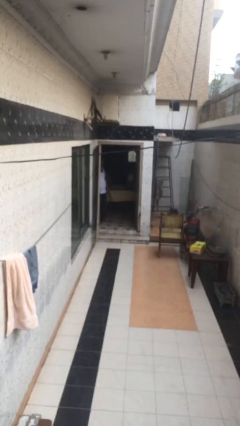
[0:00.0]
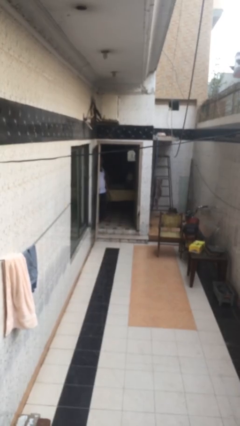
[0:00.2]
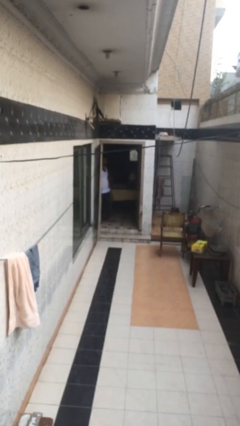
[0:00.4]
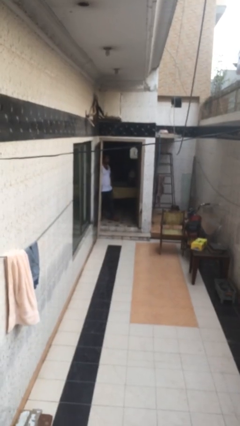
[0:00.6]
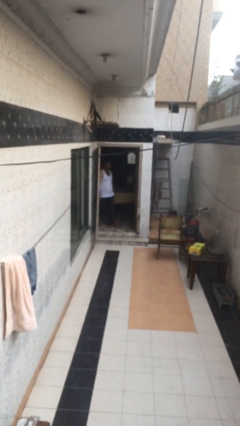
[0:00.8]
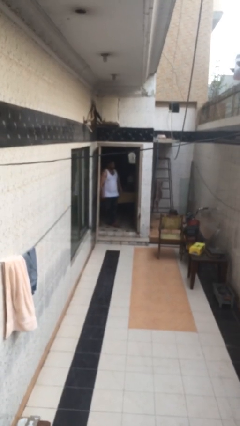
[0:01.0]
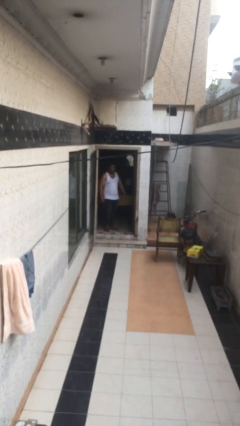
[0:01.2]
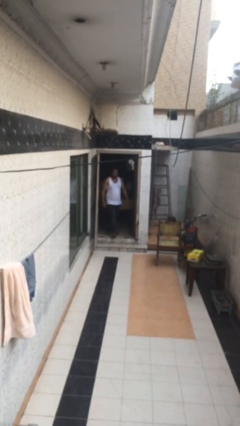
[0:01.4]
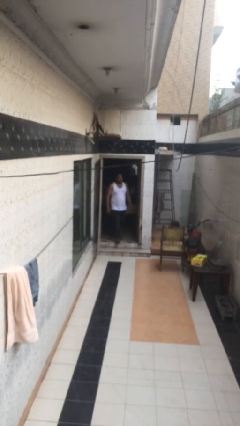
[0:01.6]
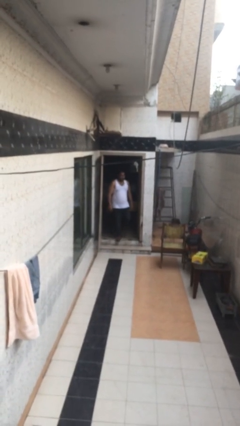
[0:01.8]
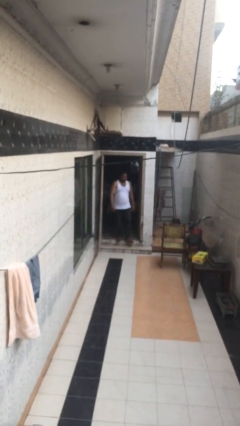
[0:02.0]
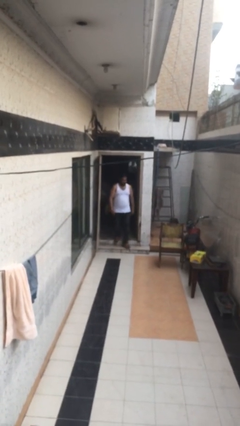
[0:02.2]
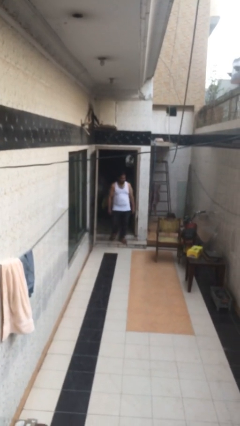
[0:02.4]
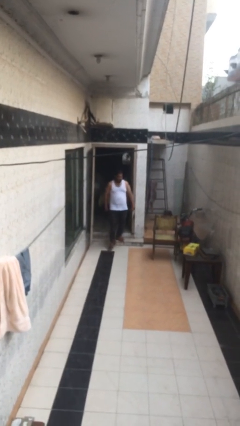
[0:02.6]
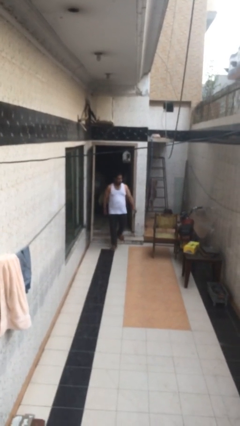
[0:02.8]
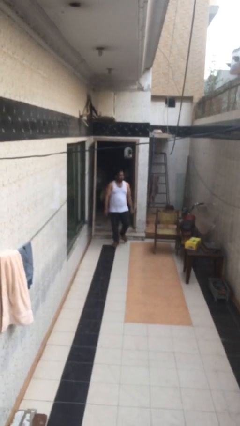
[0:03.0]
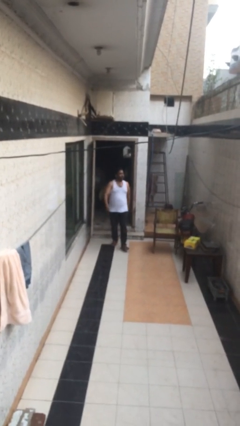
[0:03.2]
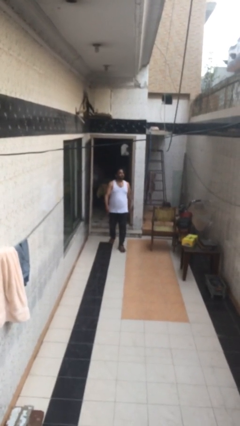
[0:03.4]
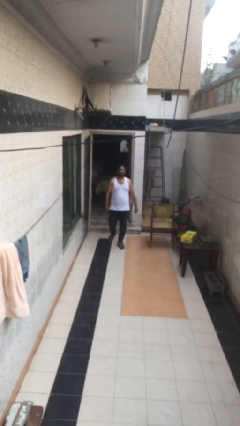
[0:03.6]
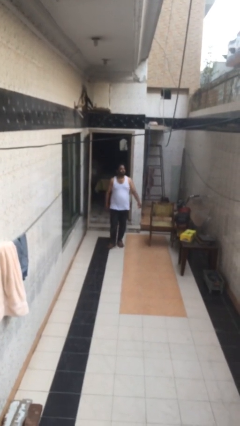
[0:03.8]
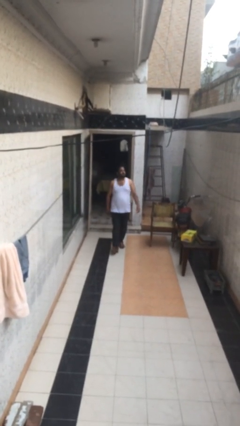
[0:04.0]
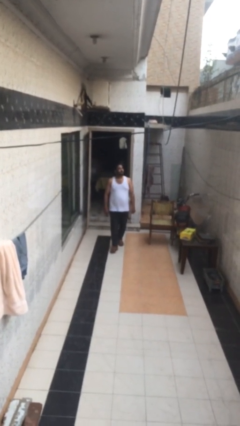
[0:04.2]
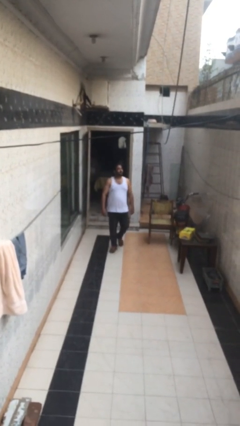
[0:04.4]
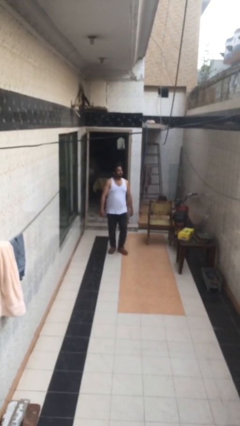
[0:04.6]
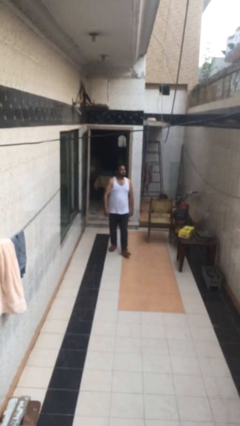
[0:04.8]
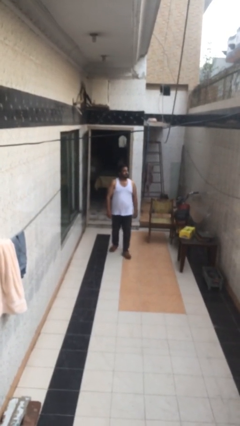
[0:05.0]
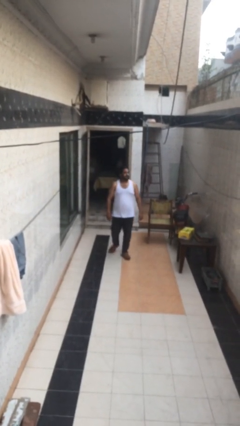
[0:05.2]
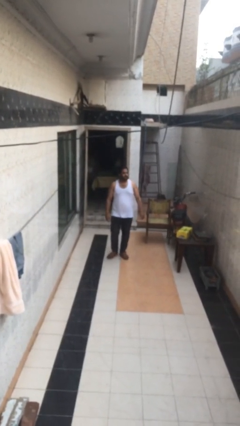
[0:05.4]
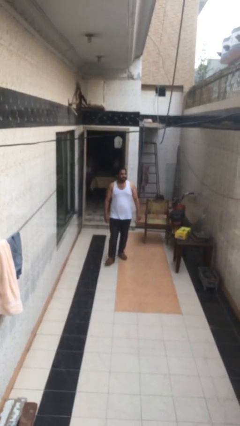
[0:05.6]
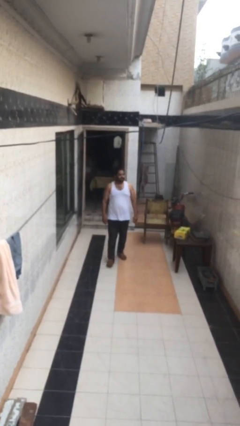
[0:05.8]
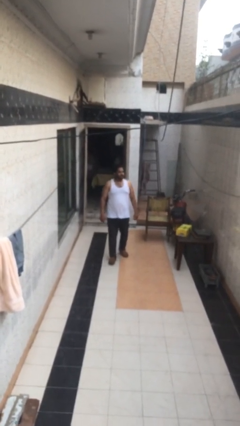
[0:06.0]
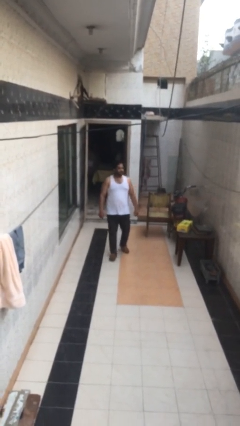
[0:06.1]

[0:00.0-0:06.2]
person enters scene through structure

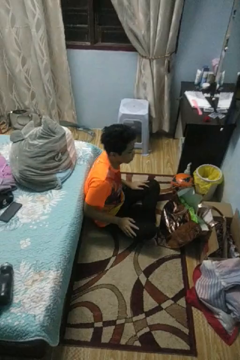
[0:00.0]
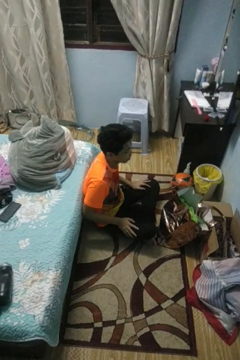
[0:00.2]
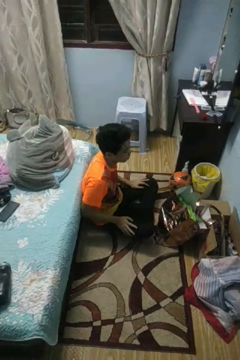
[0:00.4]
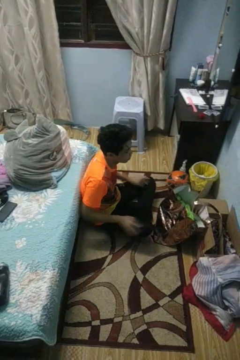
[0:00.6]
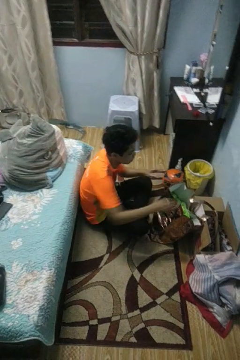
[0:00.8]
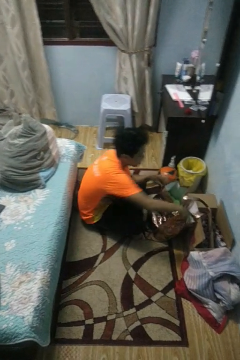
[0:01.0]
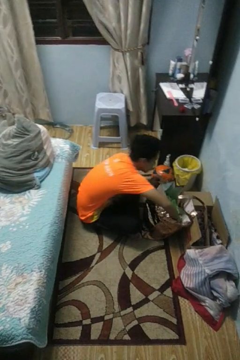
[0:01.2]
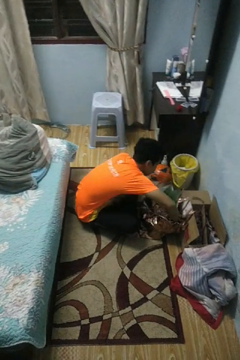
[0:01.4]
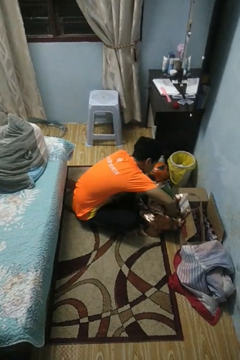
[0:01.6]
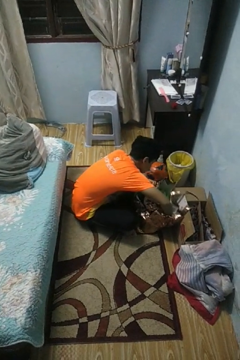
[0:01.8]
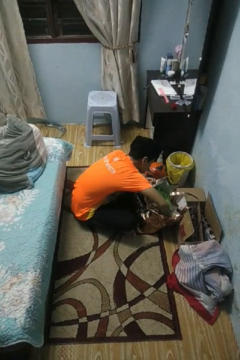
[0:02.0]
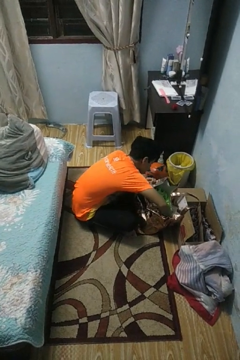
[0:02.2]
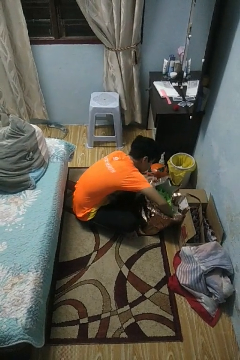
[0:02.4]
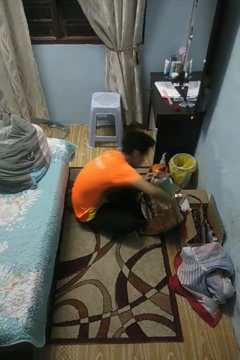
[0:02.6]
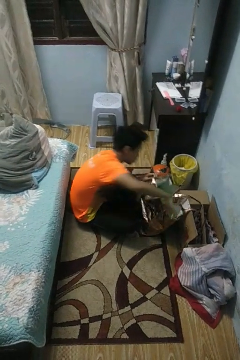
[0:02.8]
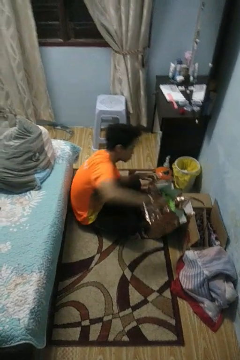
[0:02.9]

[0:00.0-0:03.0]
person searches in bag

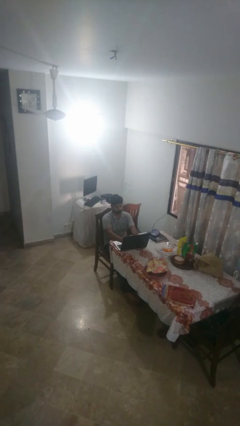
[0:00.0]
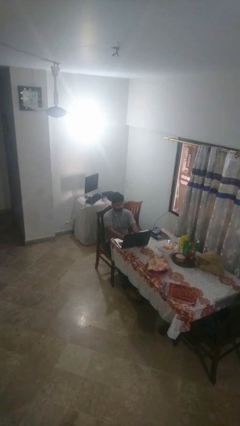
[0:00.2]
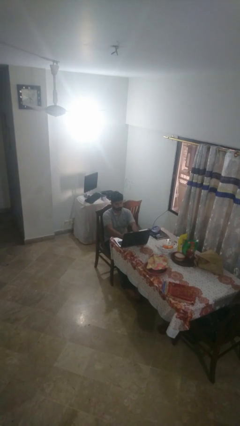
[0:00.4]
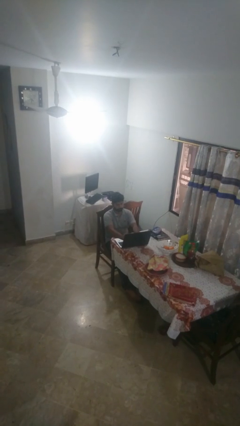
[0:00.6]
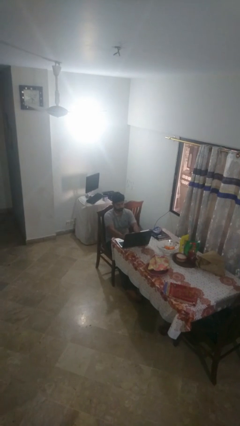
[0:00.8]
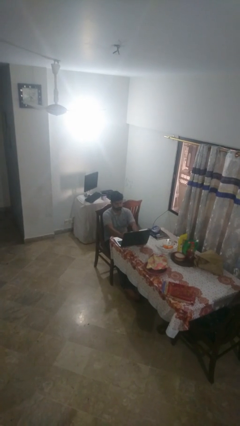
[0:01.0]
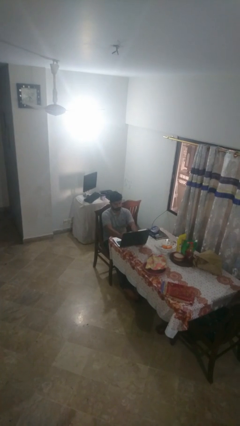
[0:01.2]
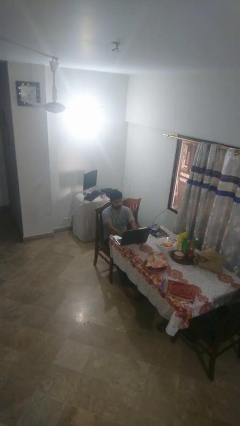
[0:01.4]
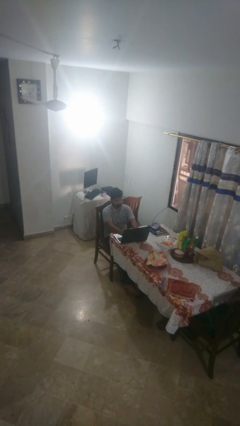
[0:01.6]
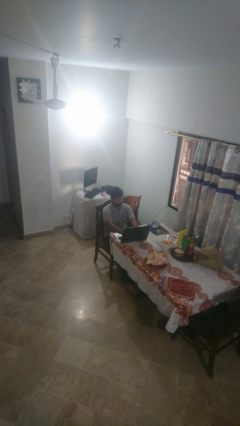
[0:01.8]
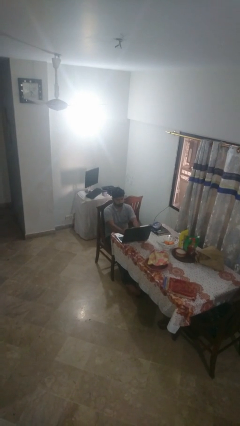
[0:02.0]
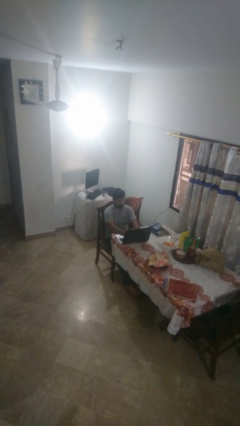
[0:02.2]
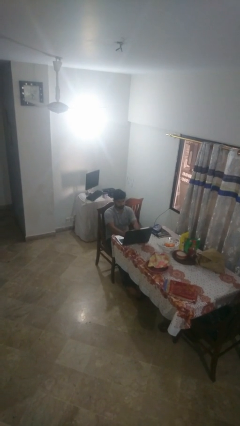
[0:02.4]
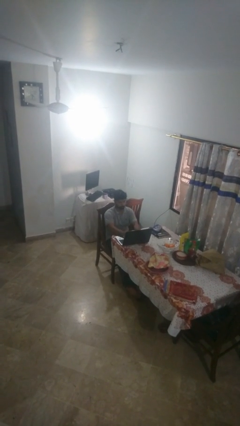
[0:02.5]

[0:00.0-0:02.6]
person interacts with laptop

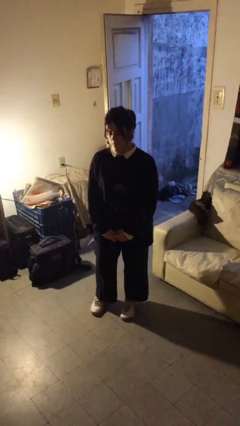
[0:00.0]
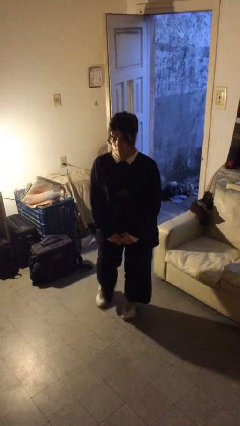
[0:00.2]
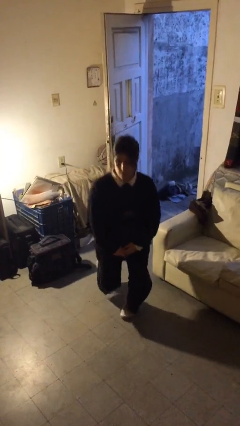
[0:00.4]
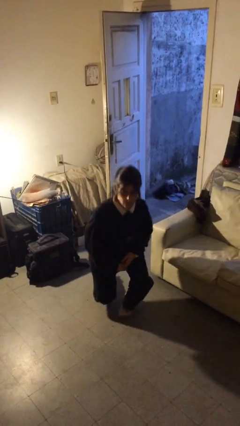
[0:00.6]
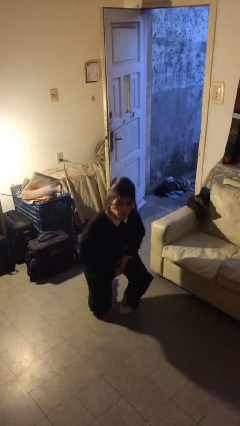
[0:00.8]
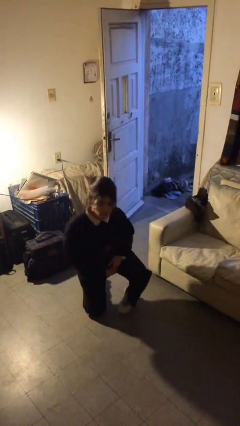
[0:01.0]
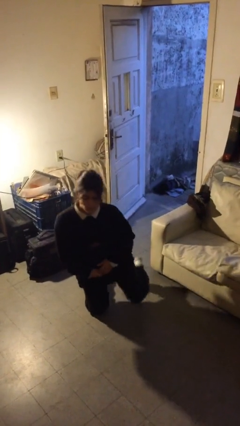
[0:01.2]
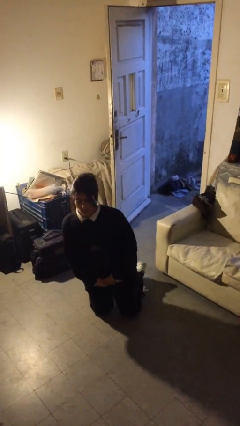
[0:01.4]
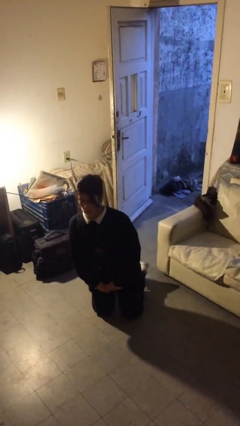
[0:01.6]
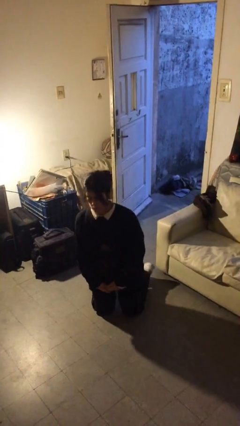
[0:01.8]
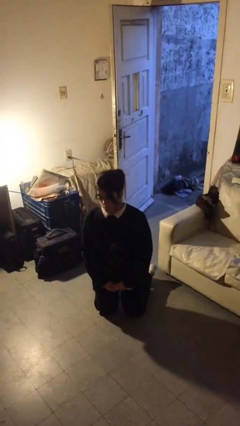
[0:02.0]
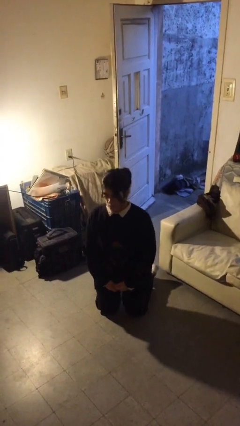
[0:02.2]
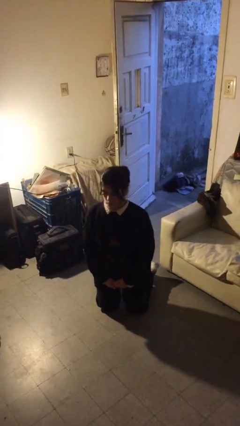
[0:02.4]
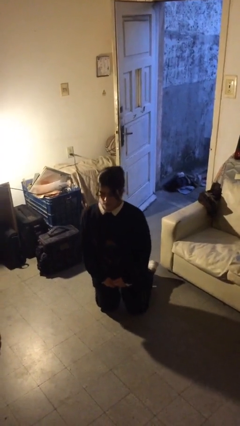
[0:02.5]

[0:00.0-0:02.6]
person kneels

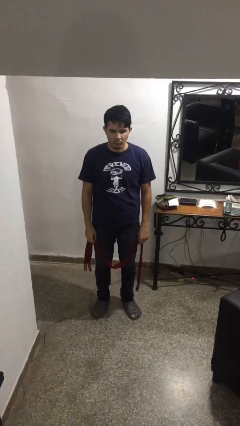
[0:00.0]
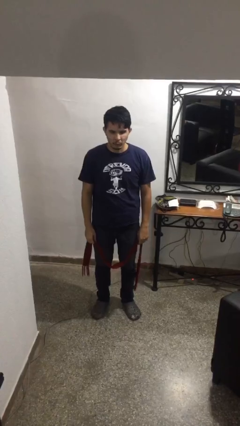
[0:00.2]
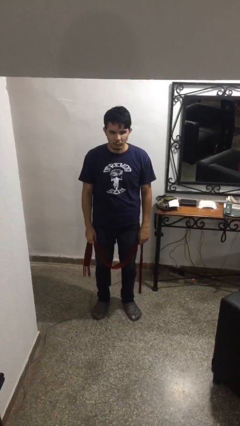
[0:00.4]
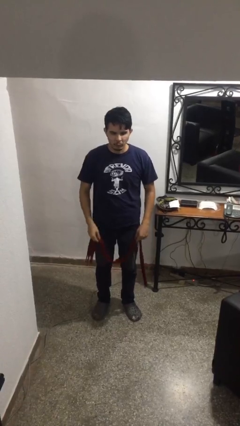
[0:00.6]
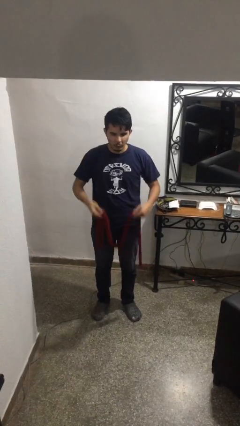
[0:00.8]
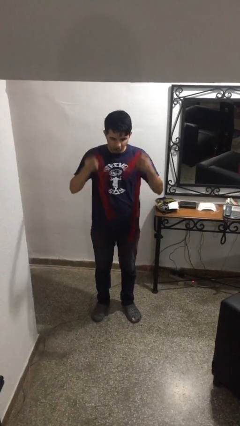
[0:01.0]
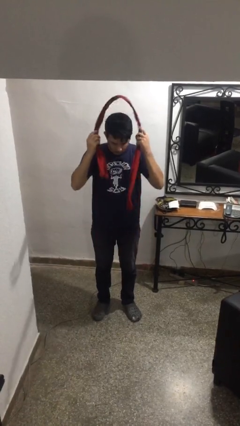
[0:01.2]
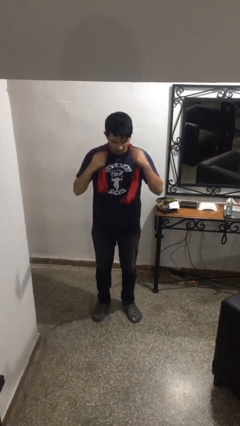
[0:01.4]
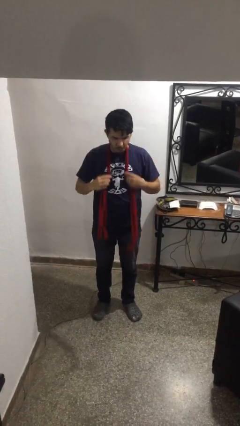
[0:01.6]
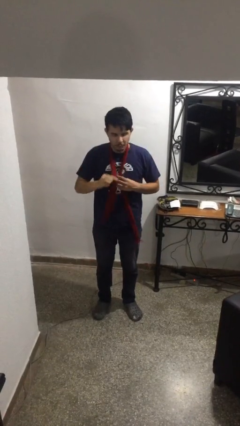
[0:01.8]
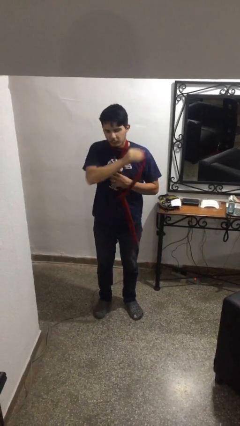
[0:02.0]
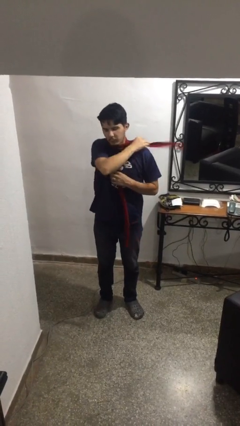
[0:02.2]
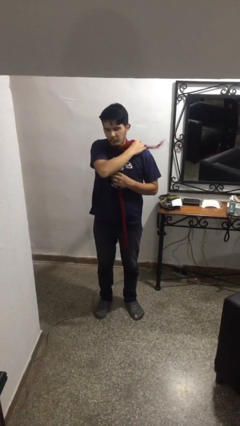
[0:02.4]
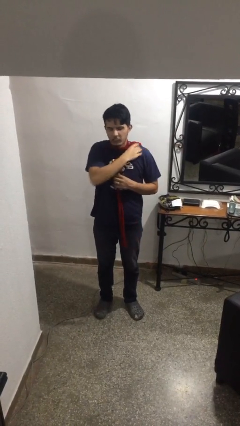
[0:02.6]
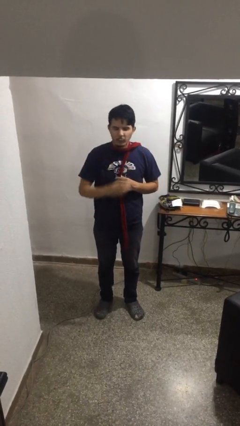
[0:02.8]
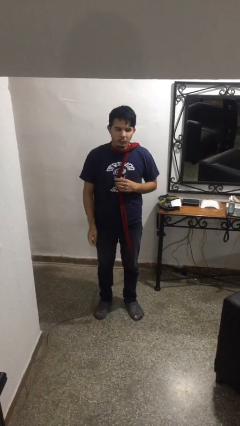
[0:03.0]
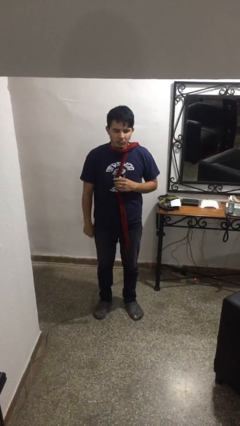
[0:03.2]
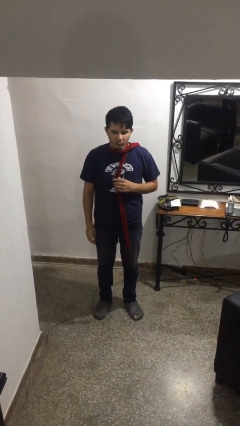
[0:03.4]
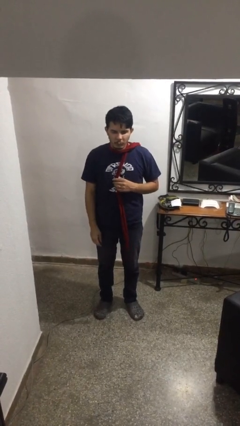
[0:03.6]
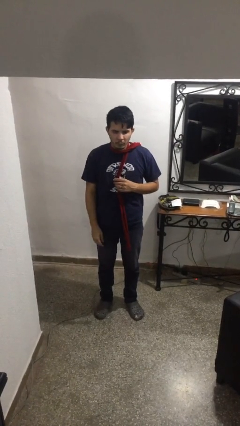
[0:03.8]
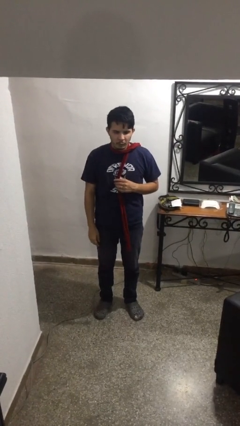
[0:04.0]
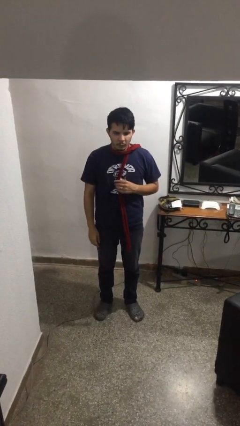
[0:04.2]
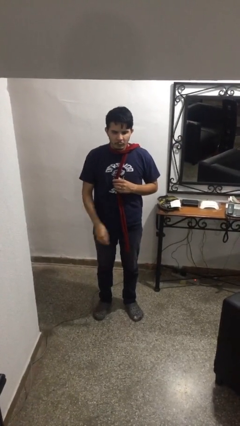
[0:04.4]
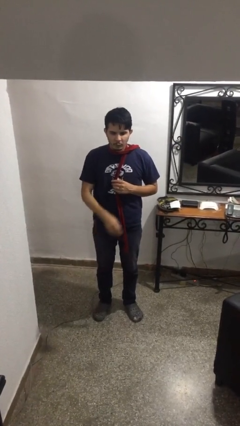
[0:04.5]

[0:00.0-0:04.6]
person puts on scarf
